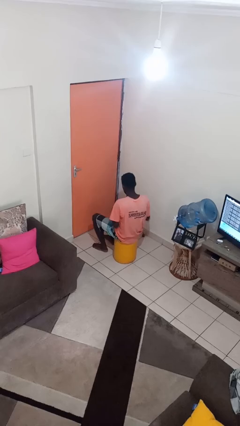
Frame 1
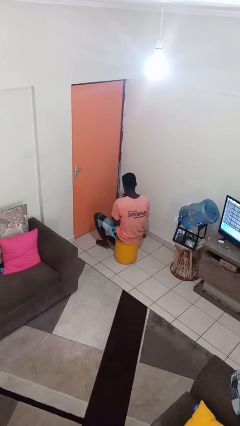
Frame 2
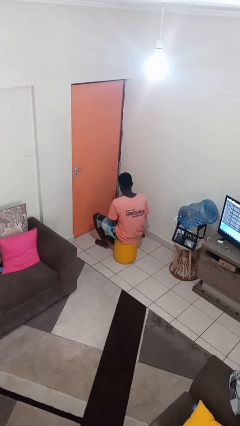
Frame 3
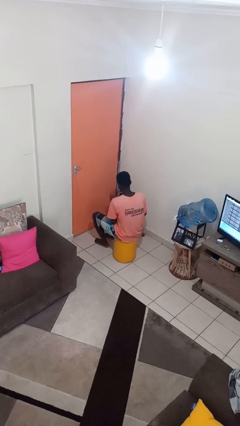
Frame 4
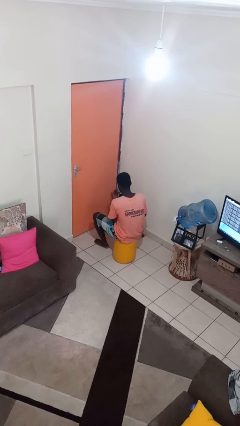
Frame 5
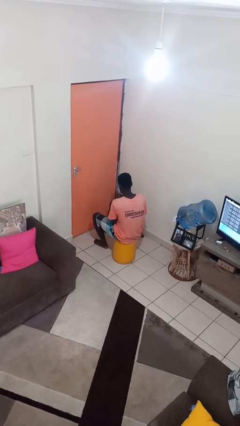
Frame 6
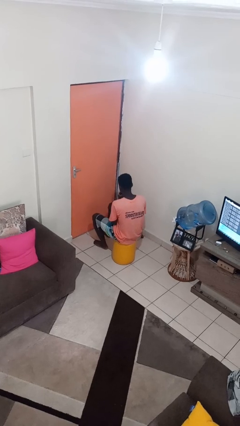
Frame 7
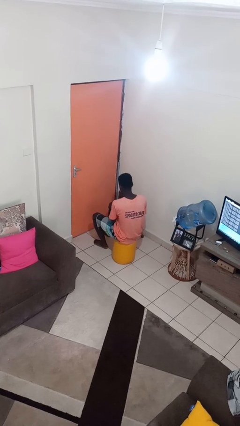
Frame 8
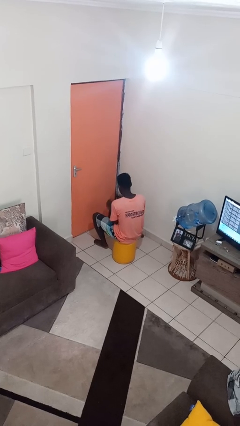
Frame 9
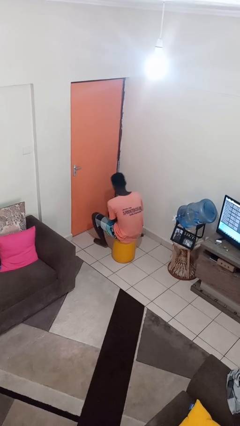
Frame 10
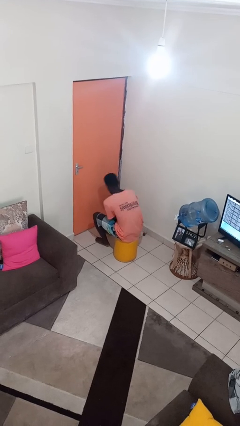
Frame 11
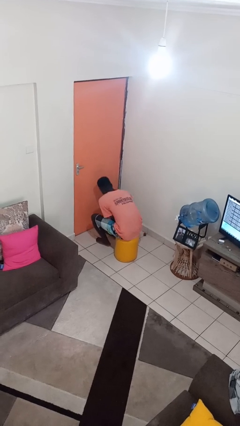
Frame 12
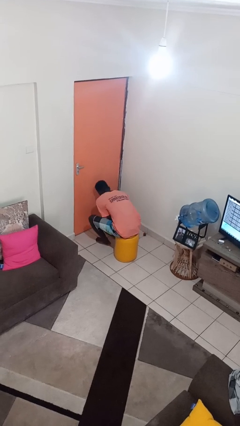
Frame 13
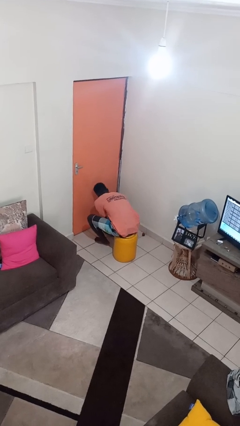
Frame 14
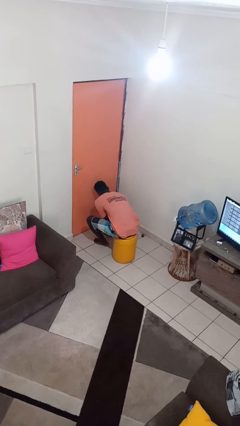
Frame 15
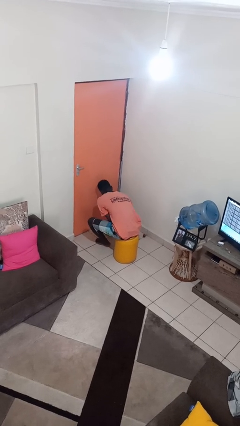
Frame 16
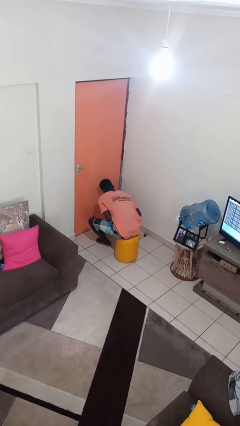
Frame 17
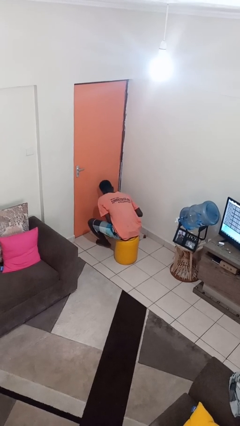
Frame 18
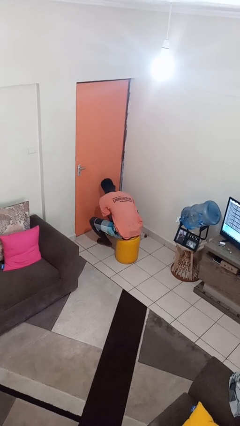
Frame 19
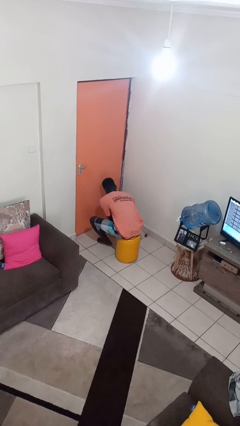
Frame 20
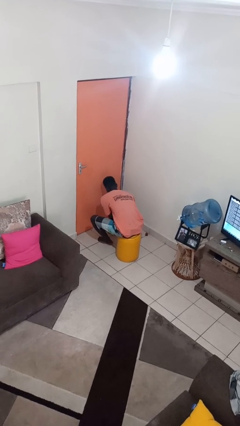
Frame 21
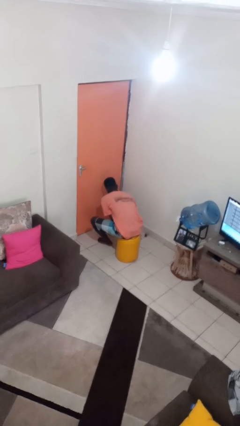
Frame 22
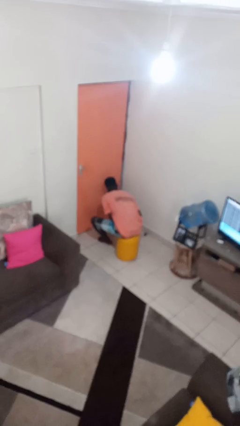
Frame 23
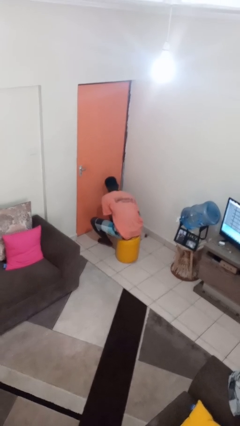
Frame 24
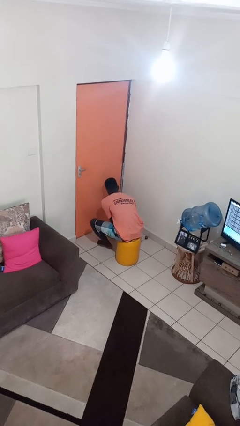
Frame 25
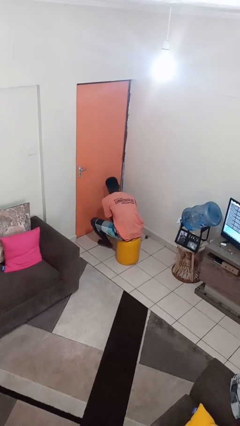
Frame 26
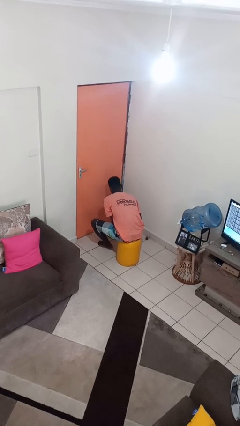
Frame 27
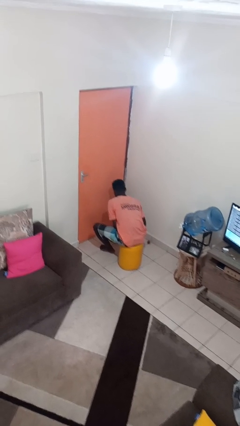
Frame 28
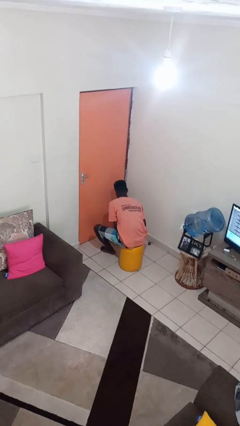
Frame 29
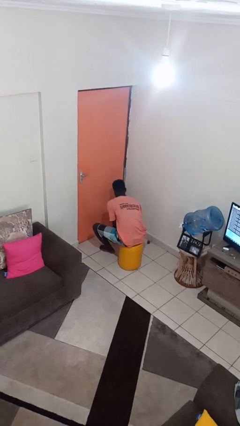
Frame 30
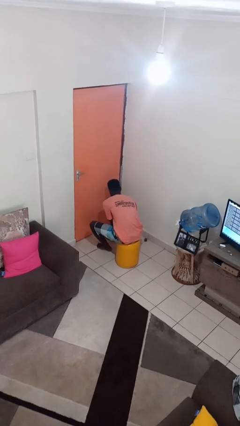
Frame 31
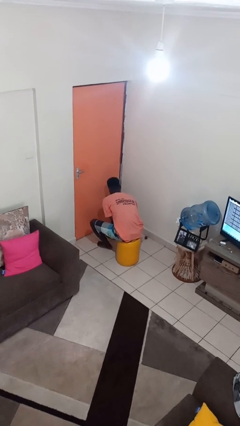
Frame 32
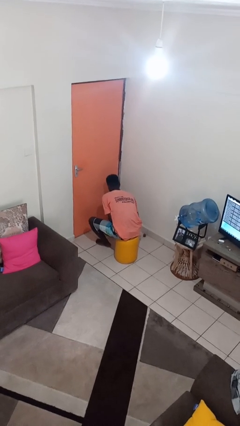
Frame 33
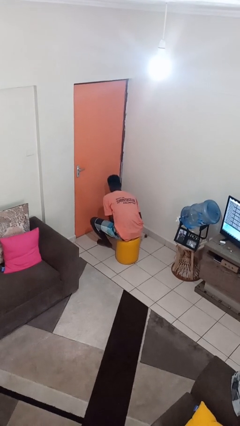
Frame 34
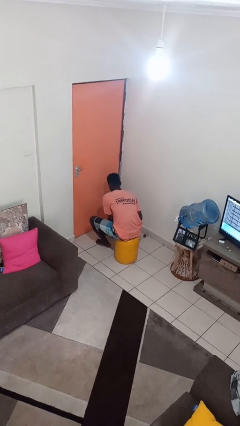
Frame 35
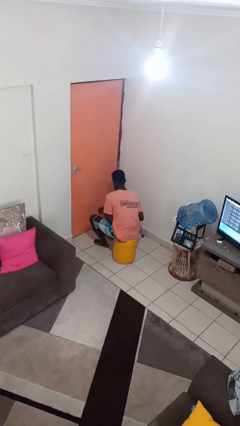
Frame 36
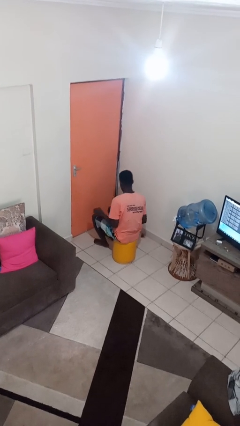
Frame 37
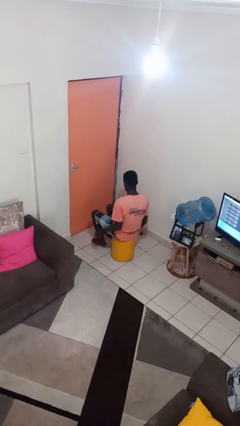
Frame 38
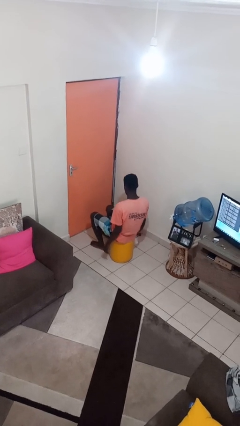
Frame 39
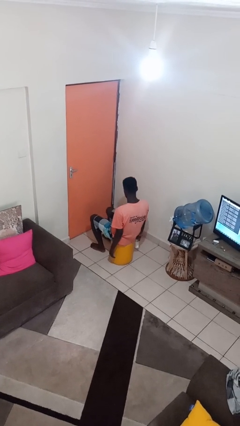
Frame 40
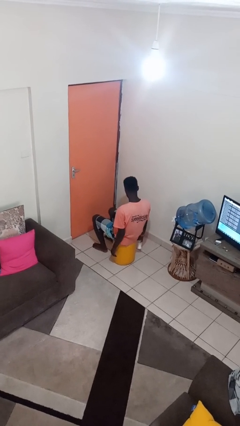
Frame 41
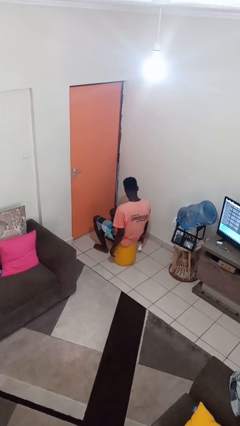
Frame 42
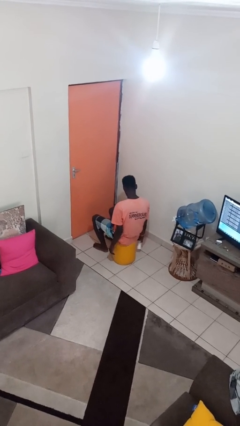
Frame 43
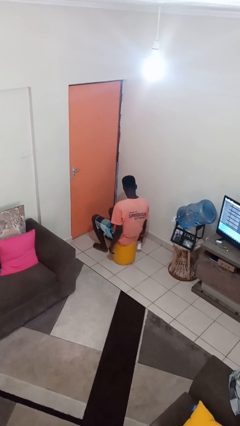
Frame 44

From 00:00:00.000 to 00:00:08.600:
person applies sunscreen

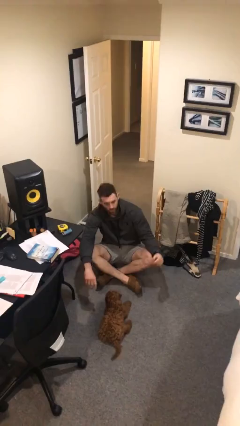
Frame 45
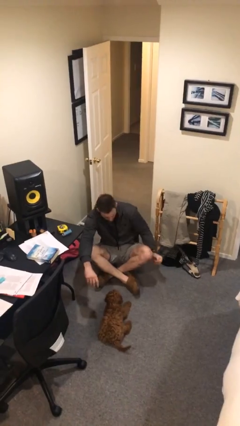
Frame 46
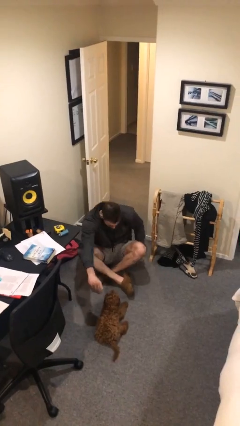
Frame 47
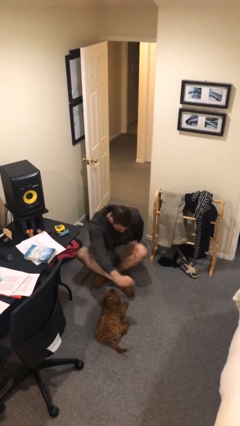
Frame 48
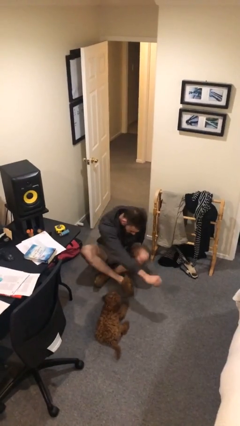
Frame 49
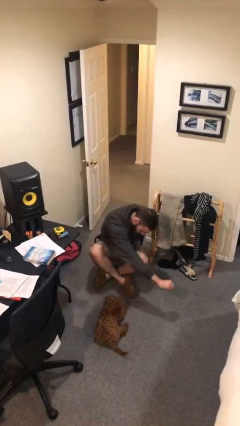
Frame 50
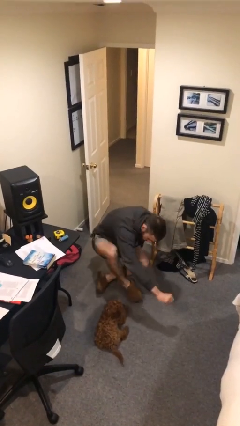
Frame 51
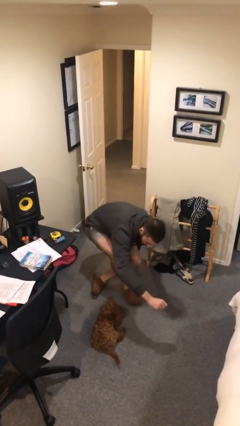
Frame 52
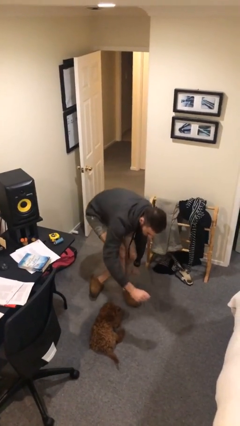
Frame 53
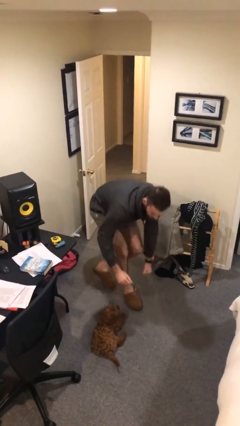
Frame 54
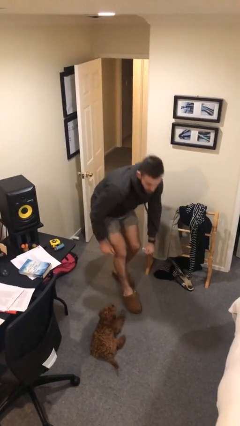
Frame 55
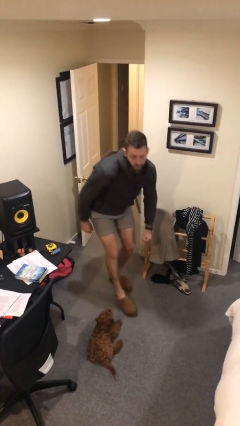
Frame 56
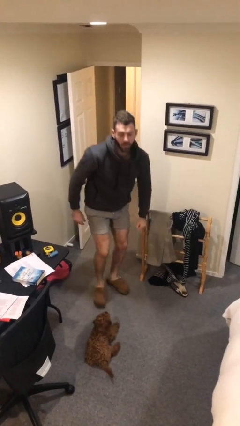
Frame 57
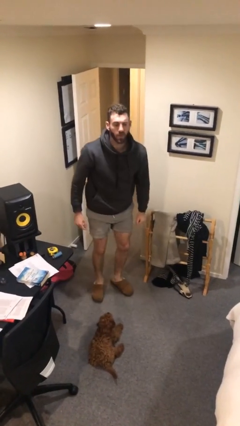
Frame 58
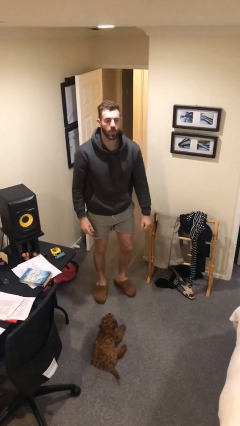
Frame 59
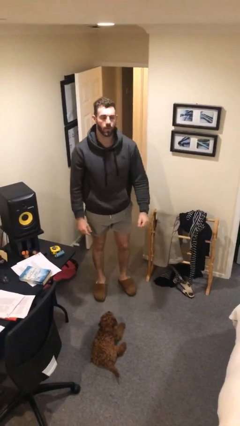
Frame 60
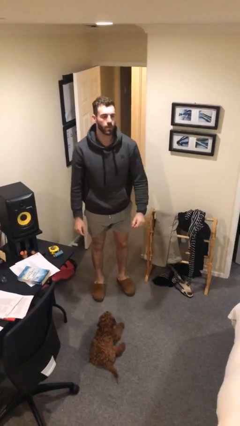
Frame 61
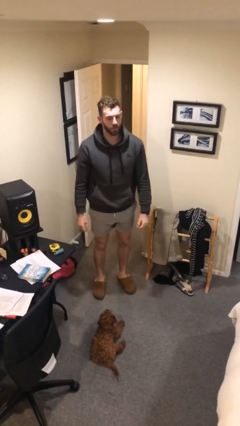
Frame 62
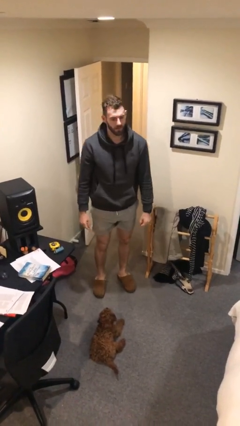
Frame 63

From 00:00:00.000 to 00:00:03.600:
person stands up from floor

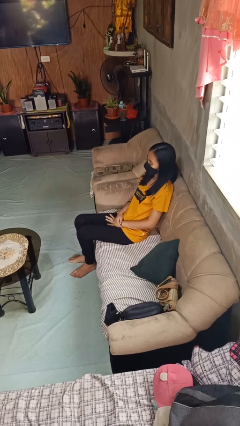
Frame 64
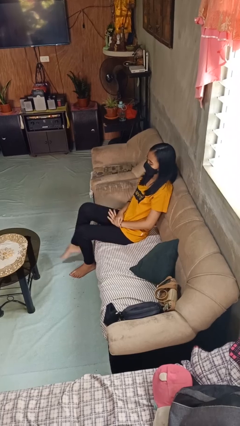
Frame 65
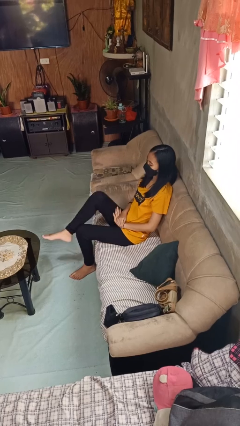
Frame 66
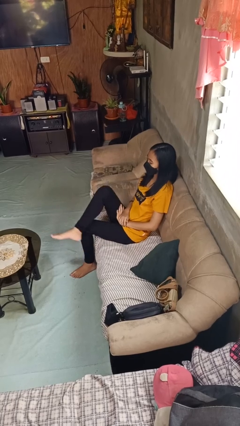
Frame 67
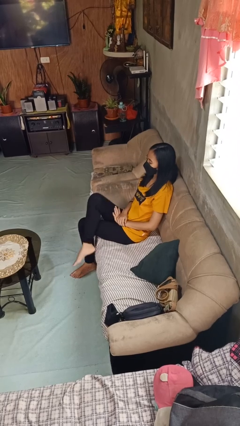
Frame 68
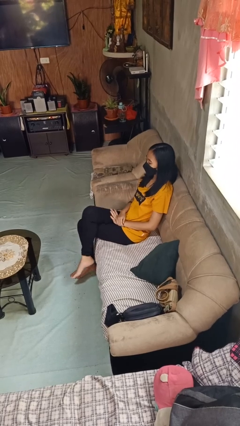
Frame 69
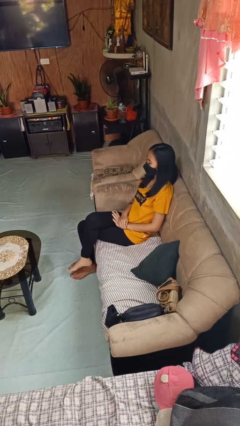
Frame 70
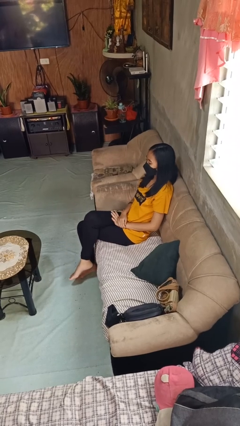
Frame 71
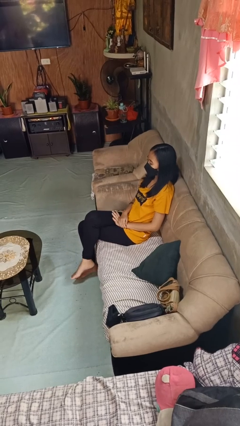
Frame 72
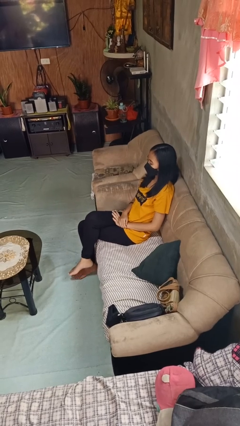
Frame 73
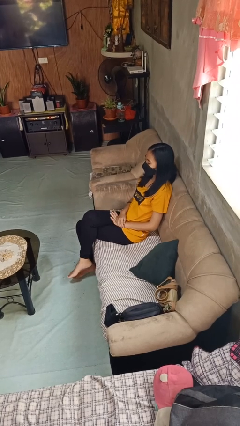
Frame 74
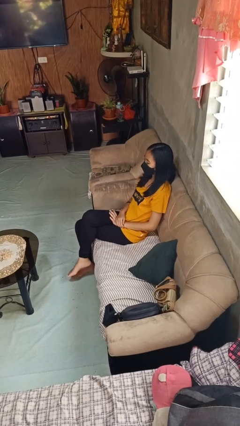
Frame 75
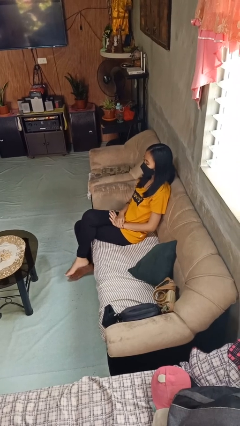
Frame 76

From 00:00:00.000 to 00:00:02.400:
person crosses legs

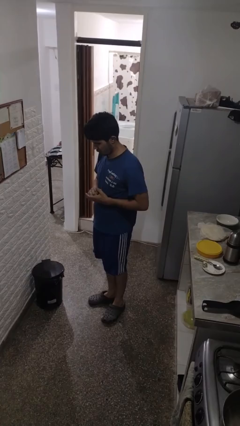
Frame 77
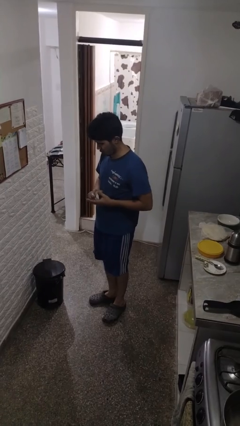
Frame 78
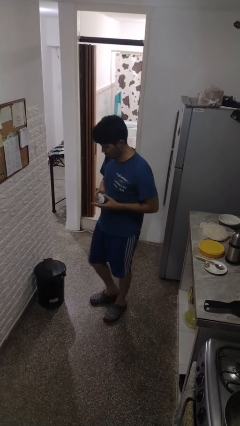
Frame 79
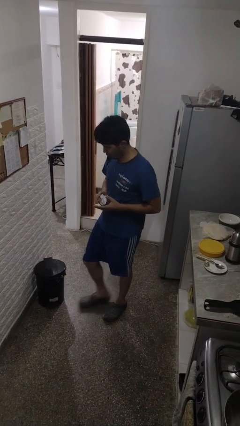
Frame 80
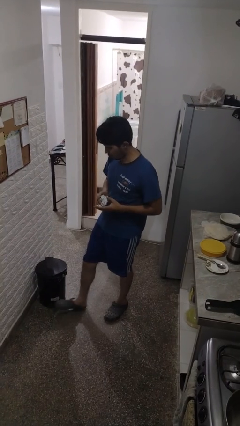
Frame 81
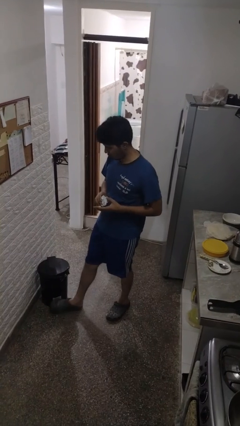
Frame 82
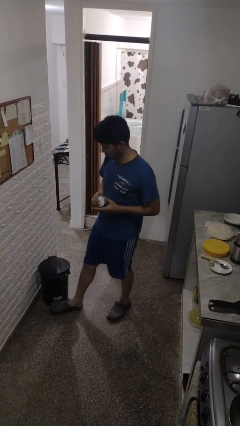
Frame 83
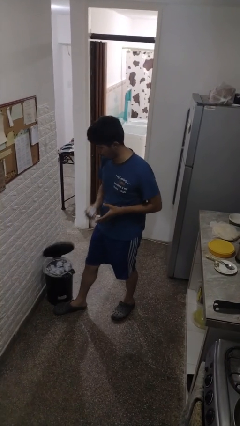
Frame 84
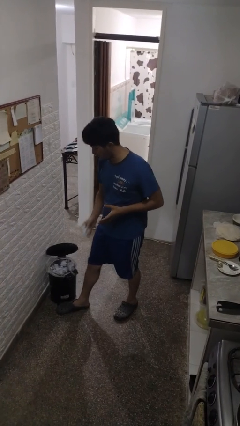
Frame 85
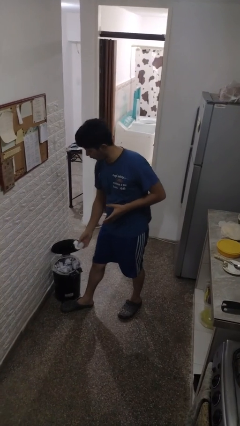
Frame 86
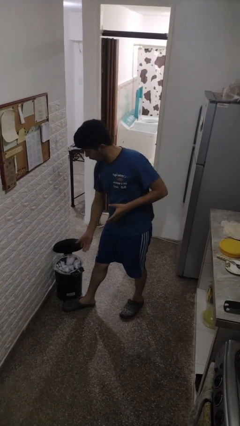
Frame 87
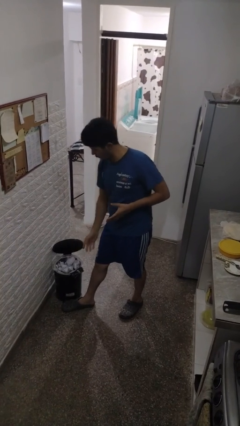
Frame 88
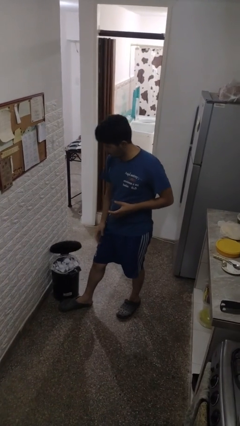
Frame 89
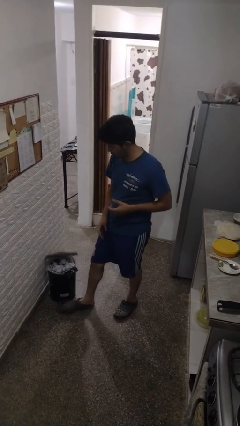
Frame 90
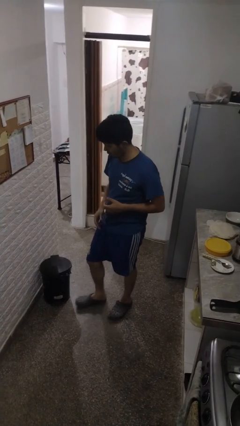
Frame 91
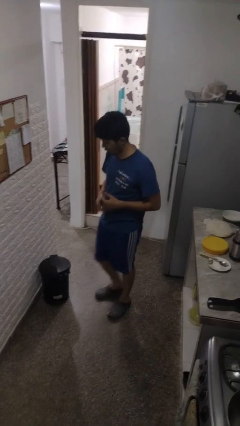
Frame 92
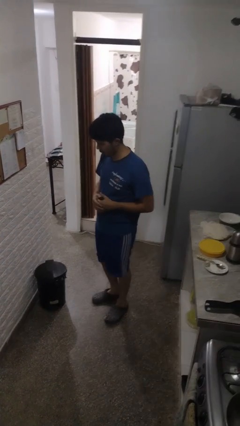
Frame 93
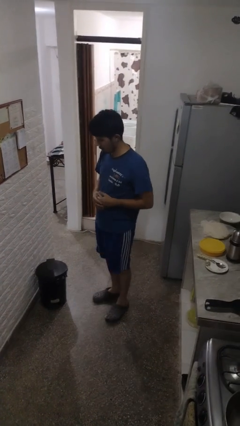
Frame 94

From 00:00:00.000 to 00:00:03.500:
person discards trash
